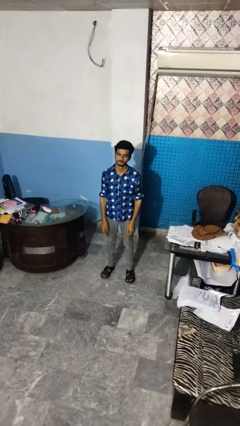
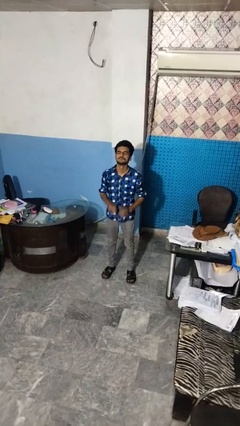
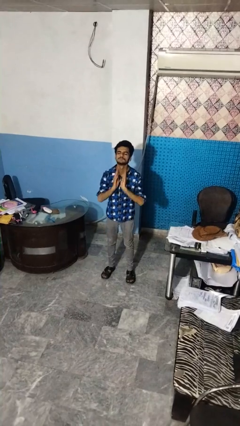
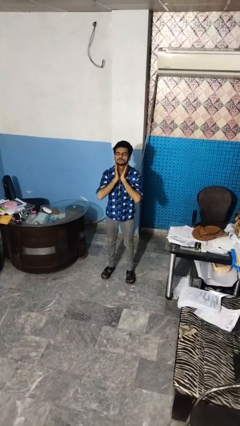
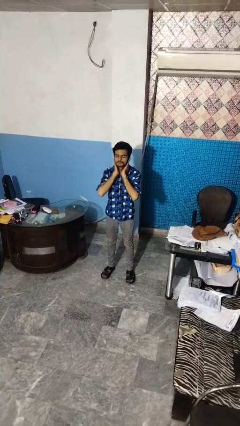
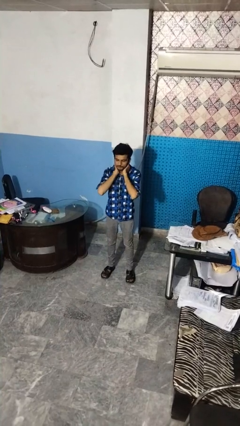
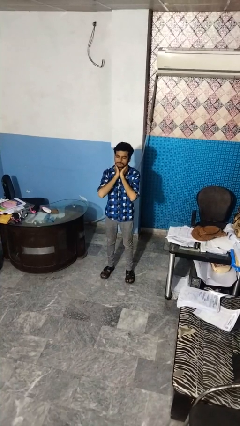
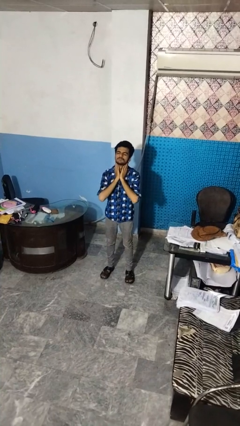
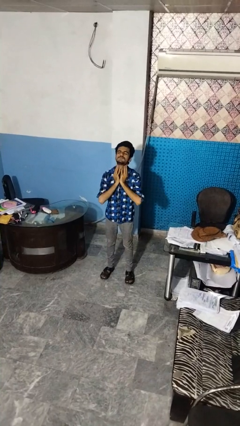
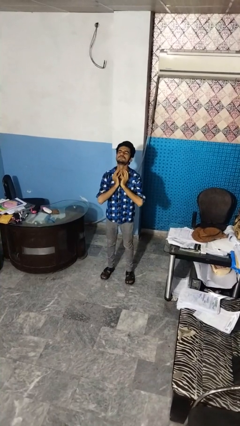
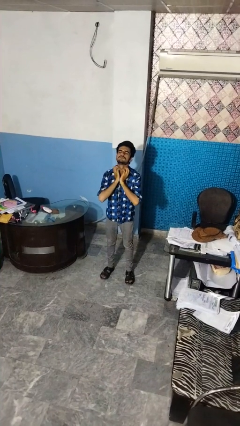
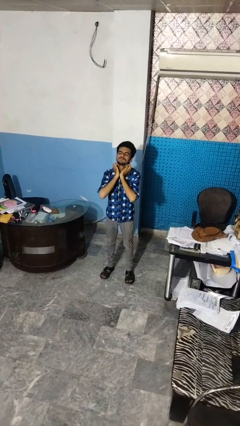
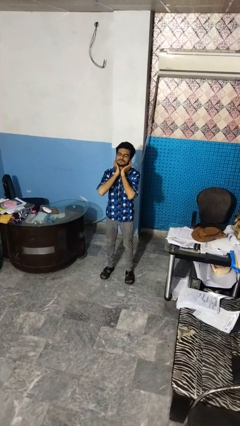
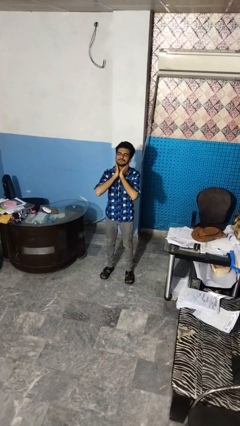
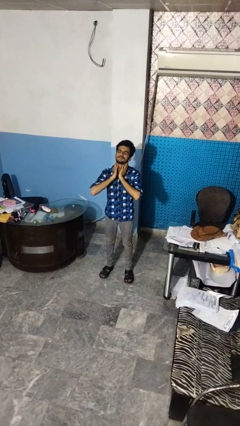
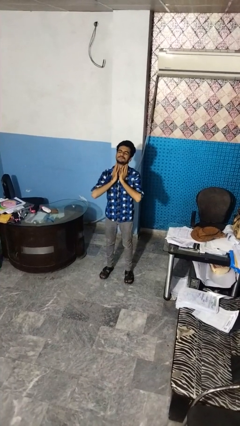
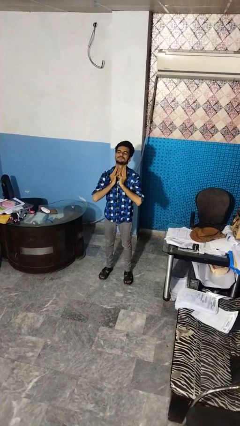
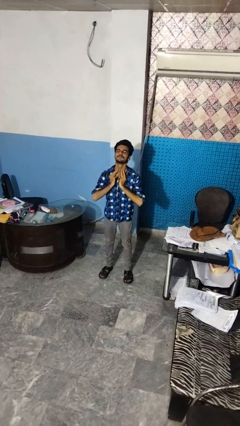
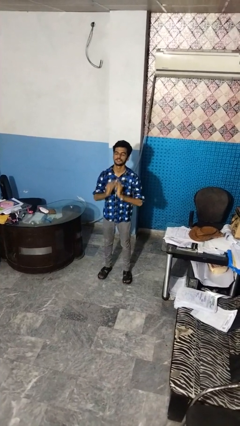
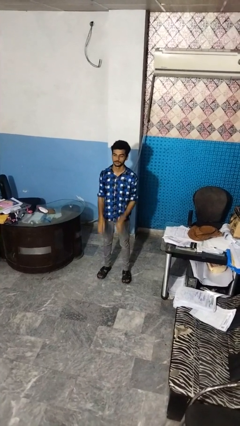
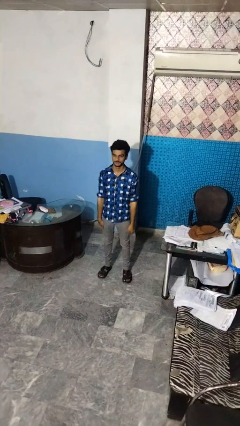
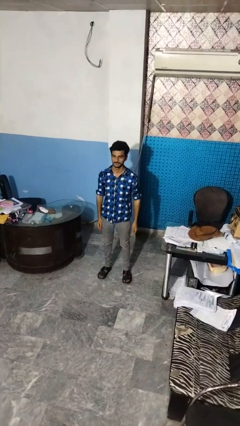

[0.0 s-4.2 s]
person rubs neck

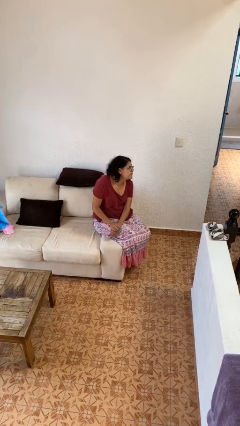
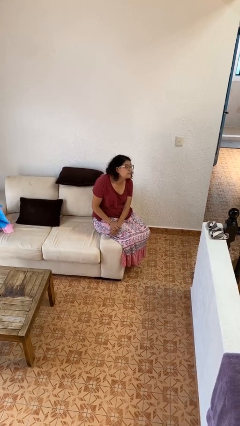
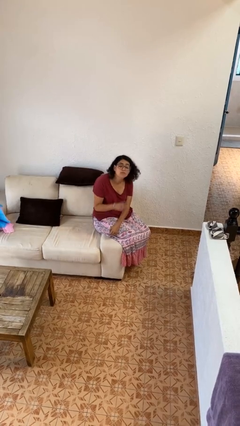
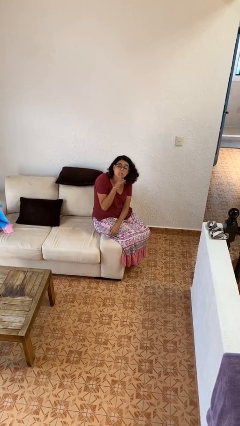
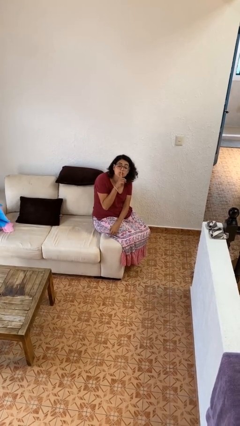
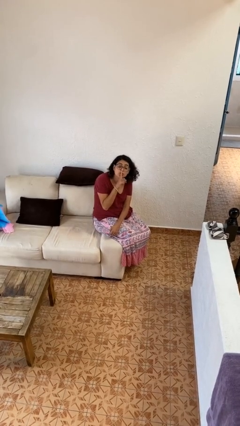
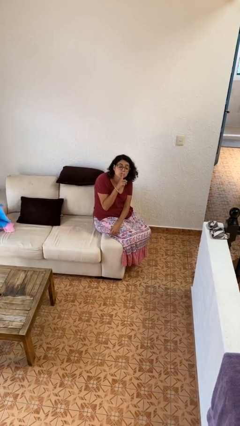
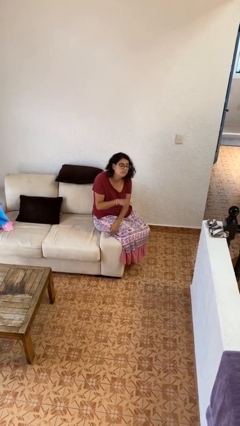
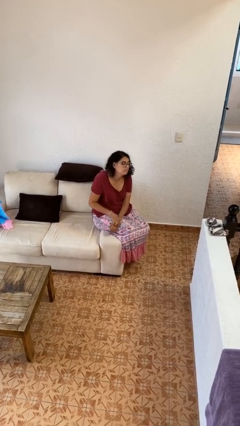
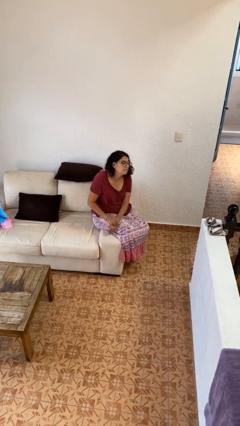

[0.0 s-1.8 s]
person gestures be quiet

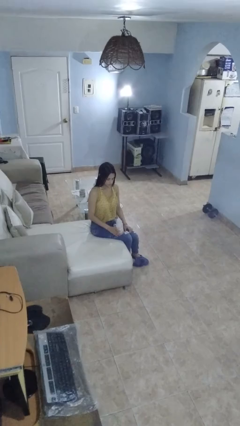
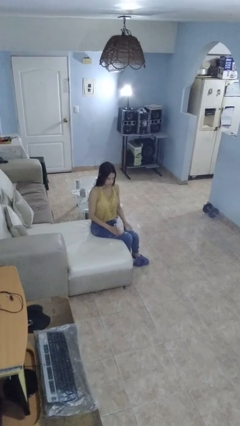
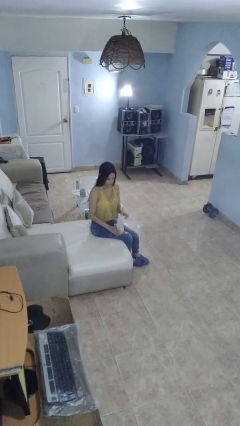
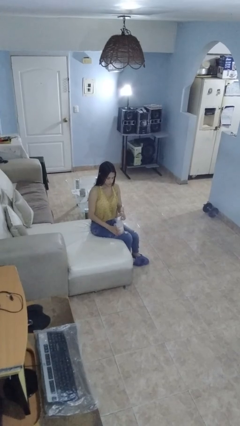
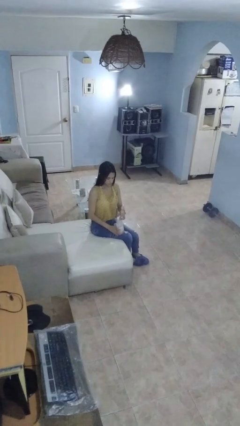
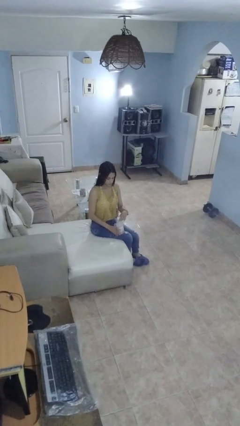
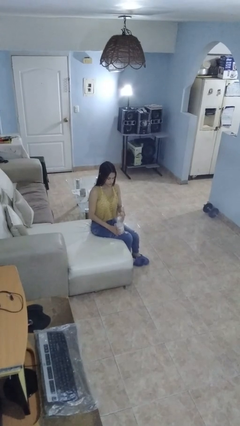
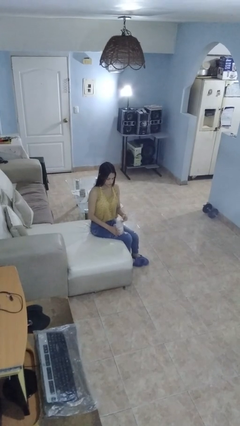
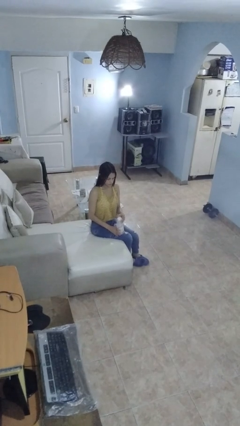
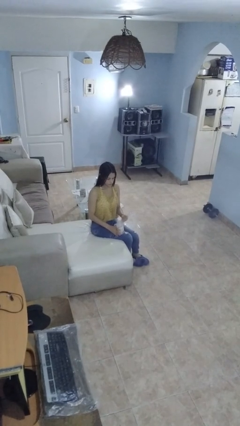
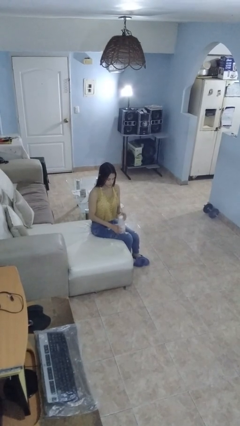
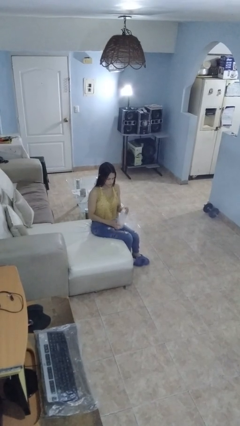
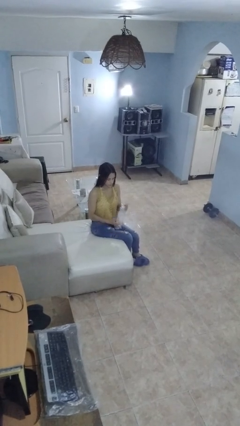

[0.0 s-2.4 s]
person screws lid to bottle

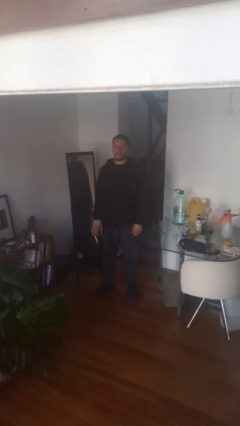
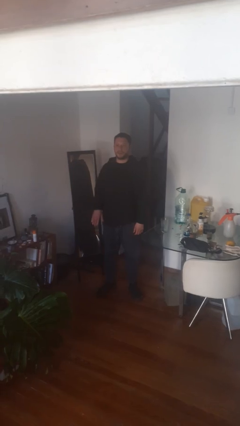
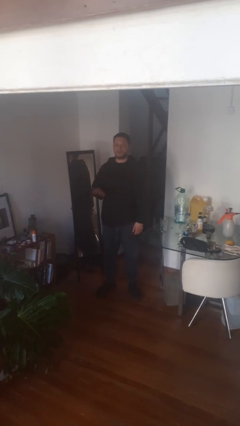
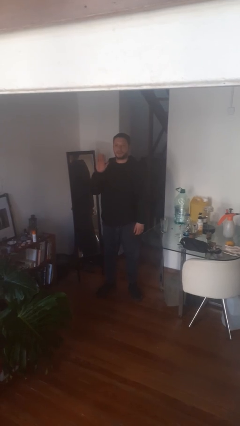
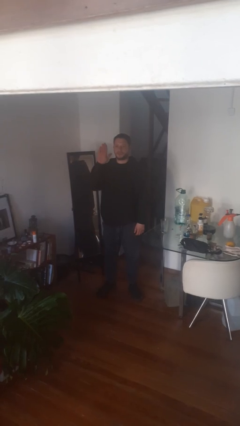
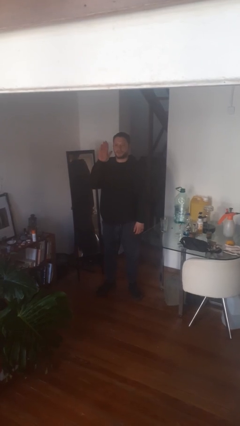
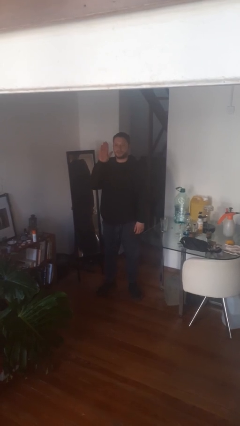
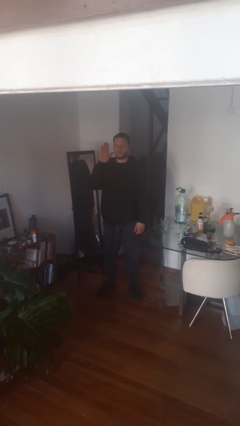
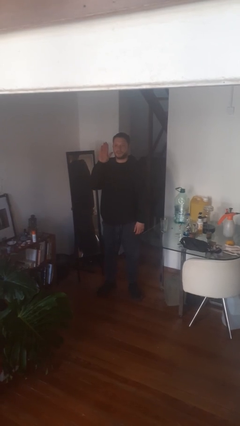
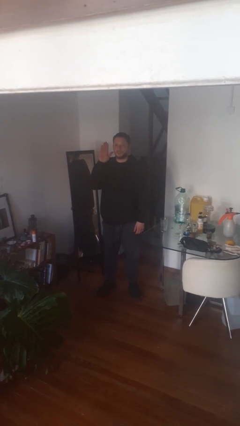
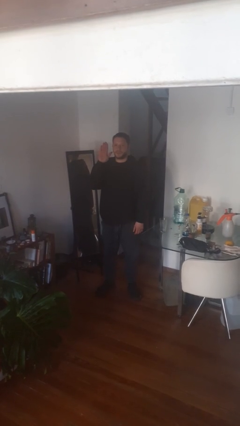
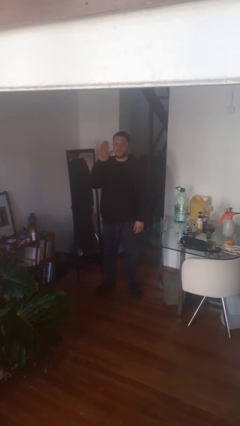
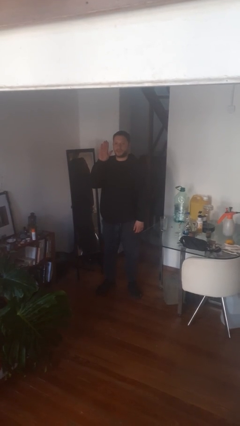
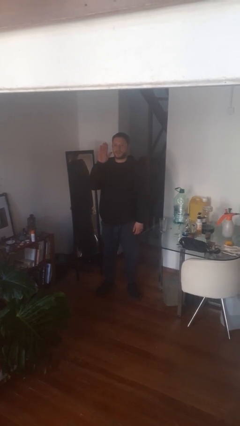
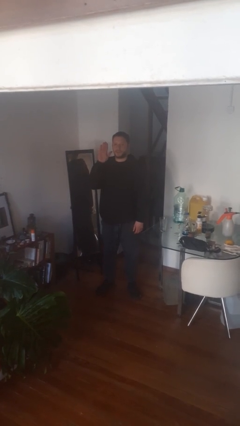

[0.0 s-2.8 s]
person gestures raise hand

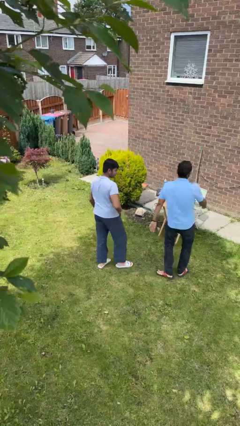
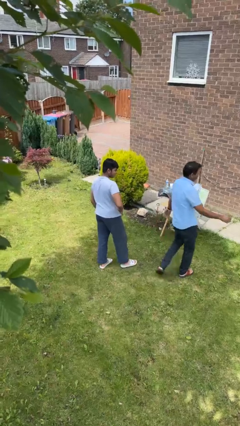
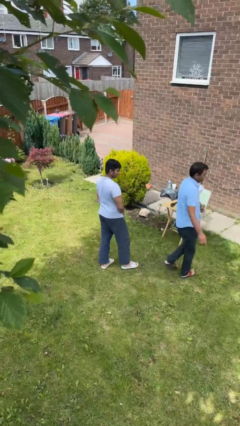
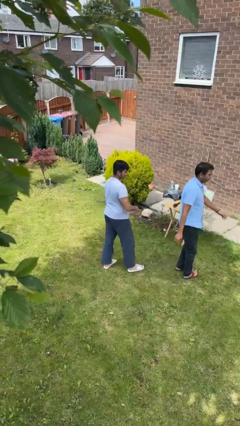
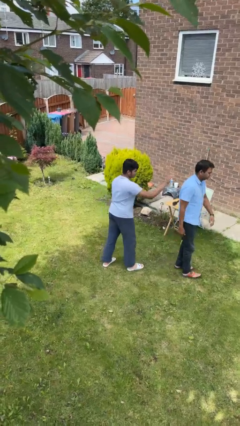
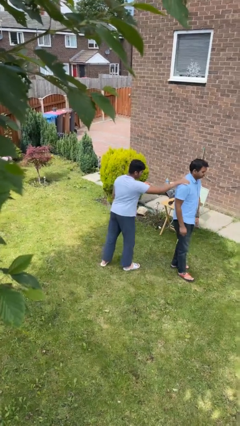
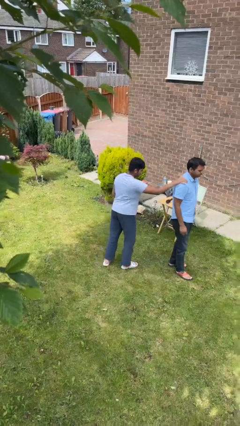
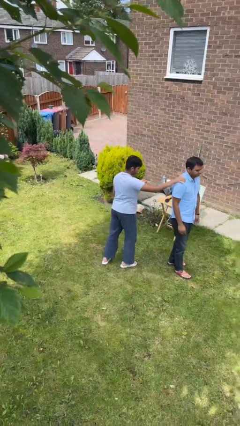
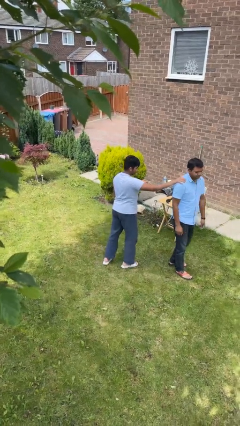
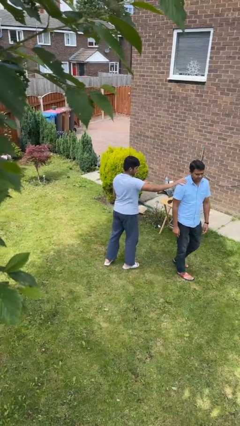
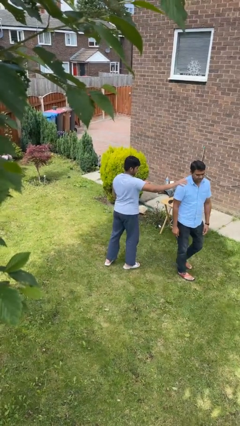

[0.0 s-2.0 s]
person grabs person by shoulder

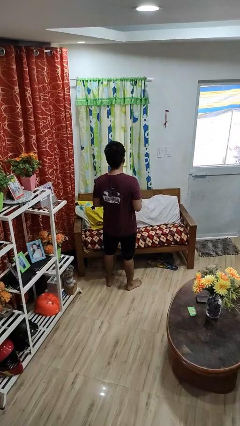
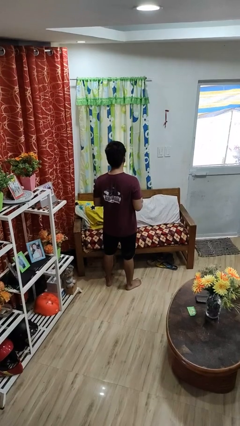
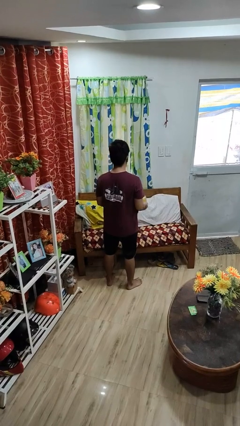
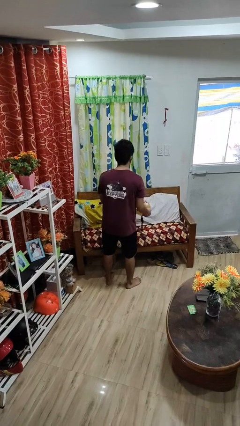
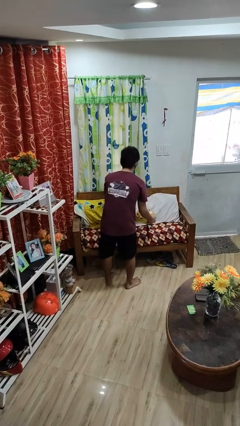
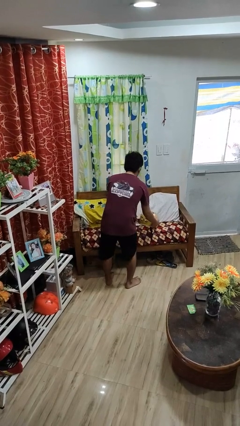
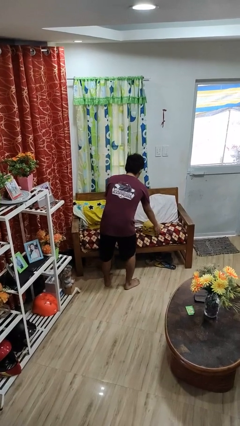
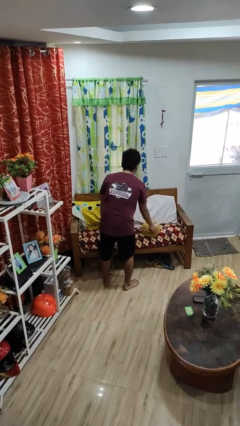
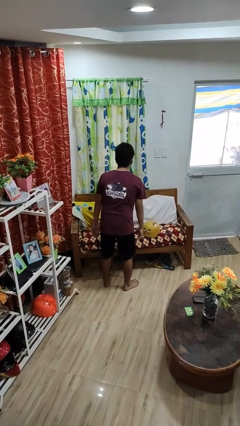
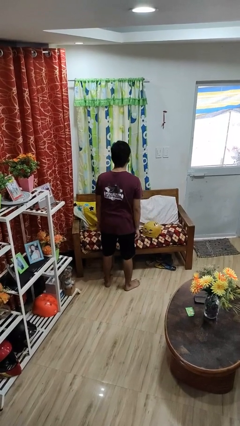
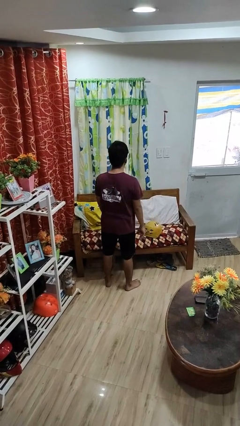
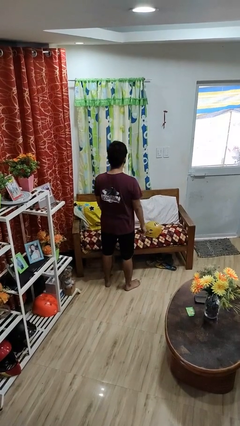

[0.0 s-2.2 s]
person puts down object on couch

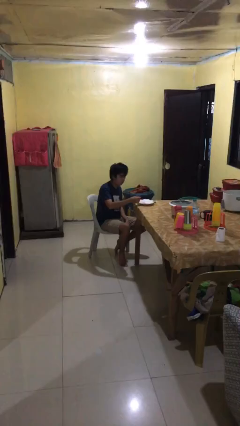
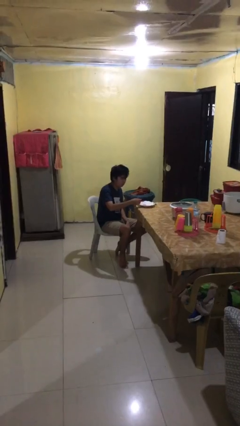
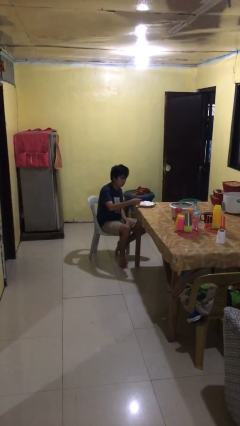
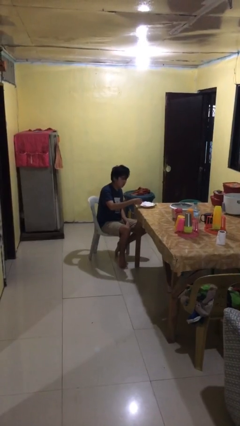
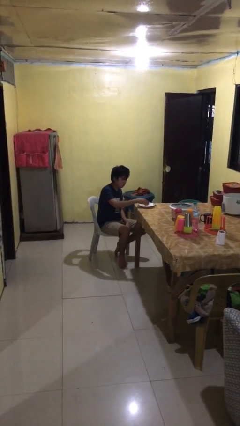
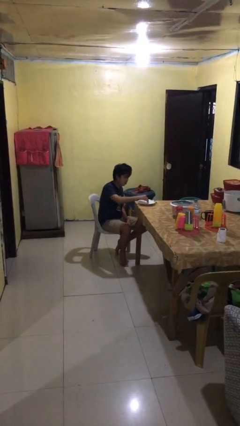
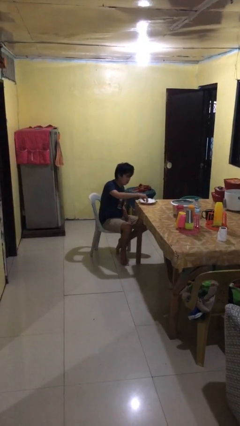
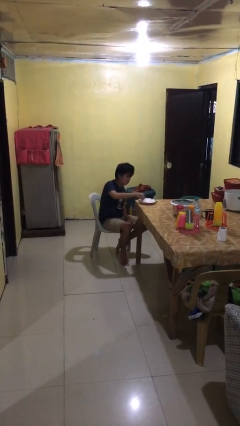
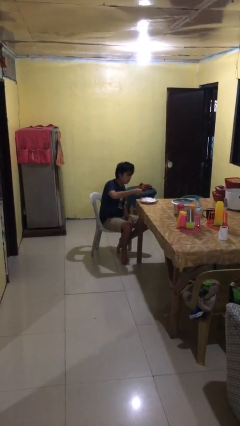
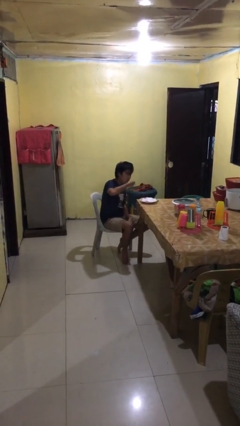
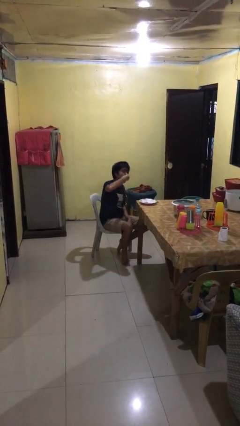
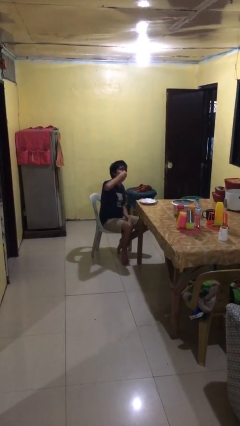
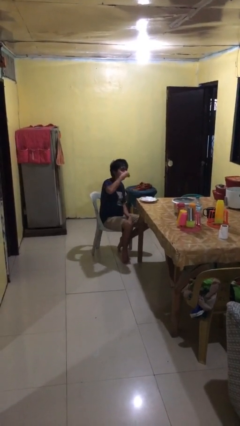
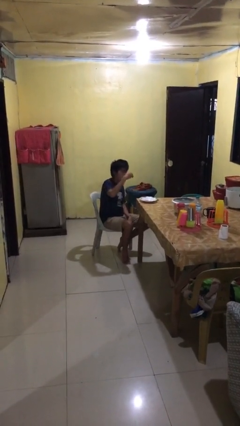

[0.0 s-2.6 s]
person eats with hands
